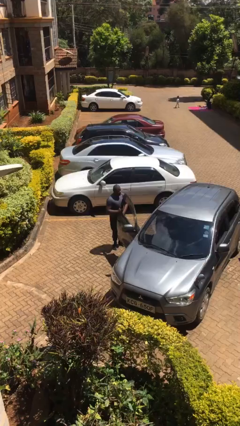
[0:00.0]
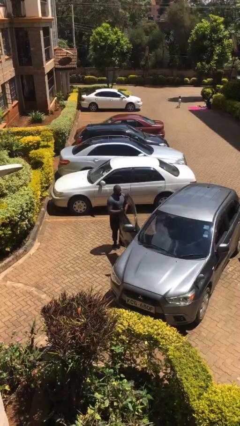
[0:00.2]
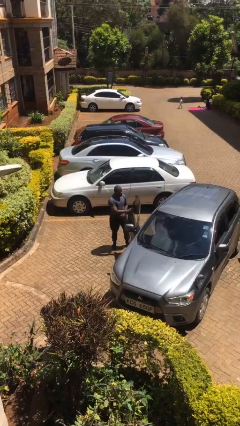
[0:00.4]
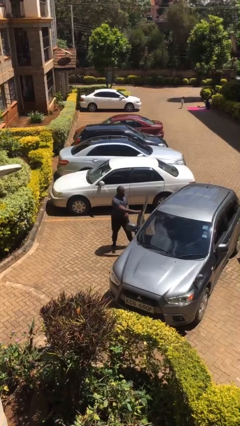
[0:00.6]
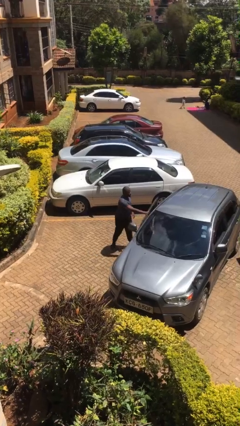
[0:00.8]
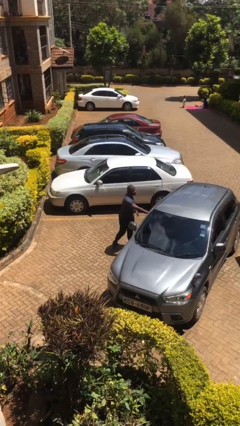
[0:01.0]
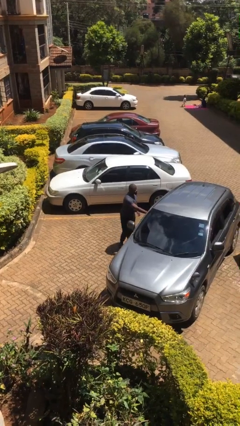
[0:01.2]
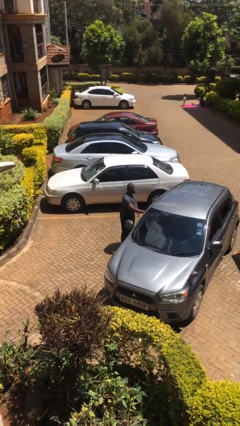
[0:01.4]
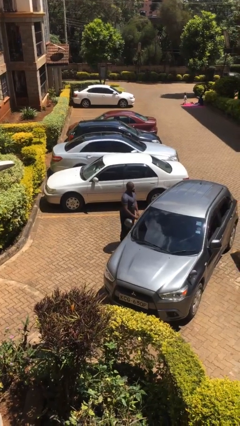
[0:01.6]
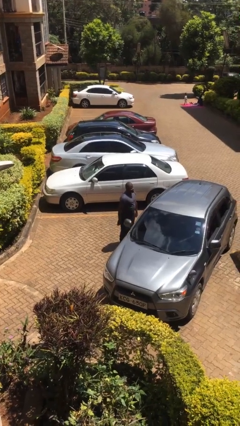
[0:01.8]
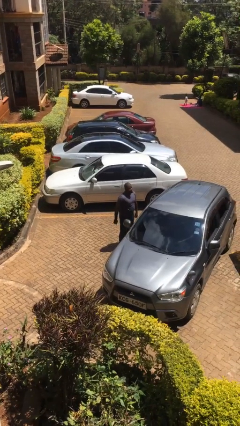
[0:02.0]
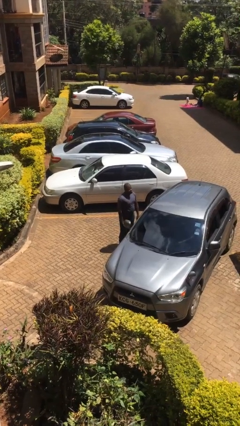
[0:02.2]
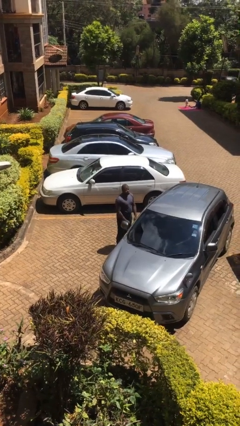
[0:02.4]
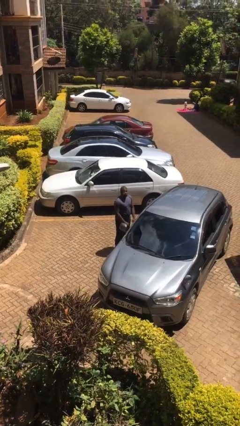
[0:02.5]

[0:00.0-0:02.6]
person closes car door

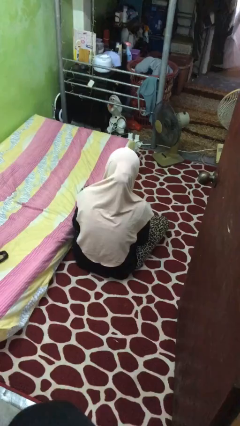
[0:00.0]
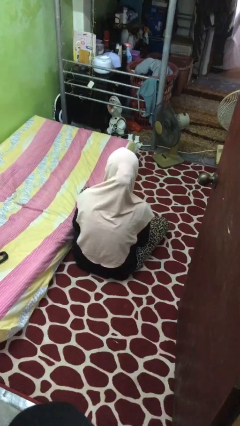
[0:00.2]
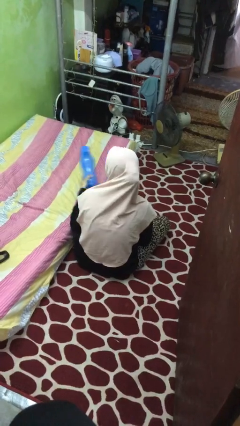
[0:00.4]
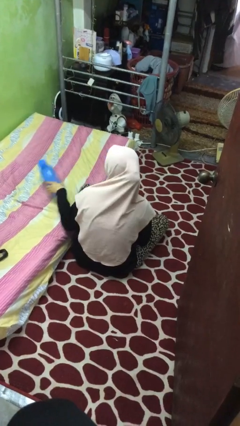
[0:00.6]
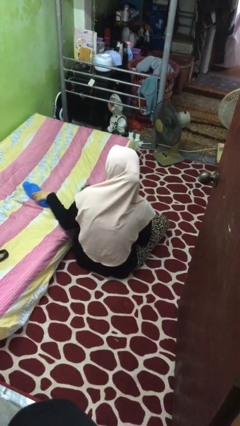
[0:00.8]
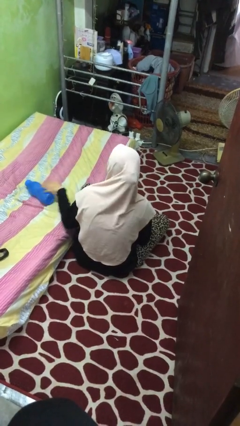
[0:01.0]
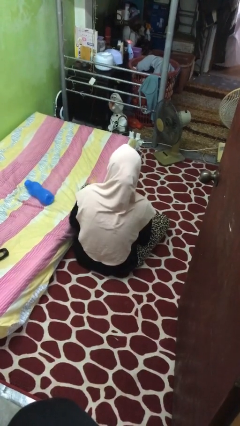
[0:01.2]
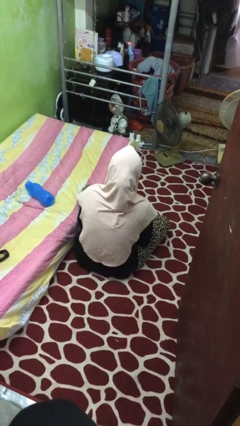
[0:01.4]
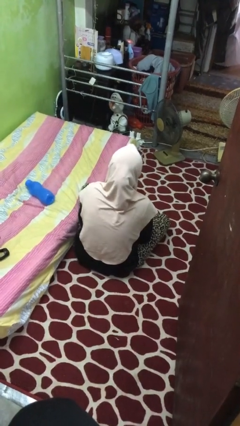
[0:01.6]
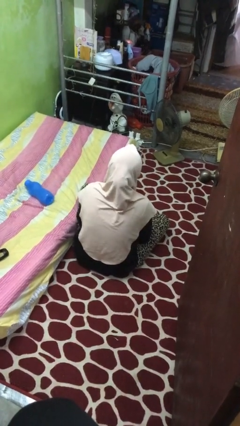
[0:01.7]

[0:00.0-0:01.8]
person puts down object on bed

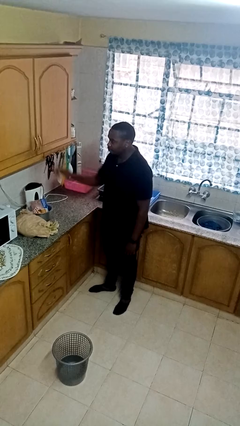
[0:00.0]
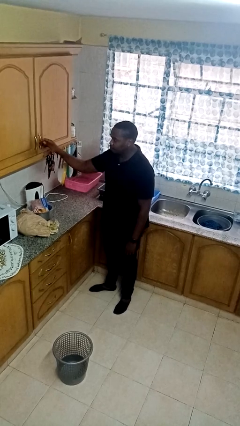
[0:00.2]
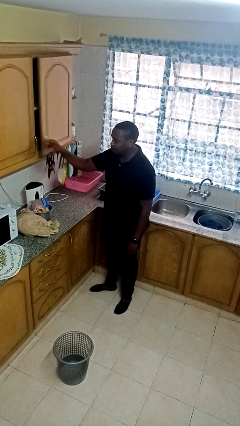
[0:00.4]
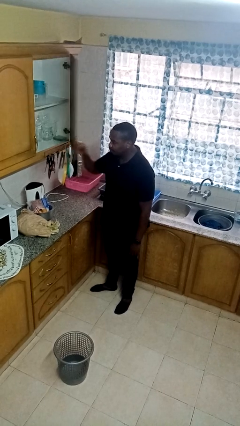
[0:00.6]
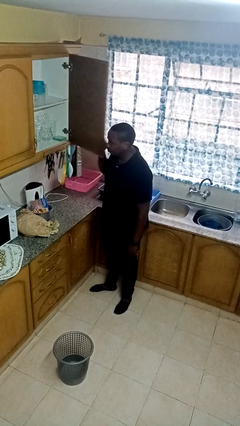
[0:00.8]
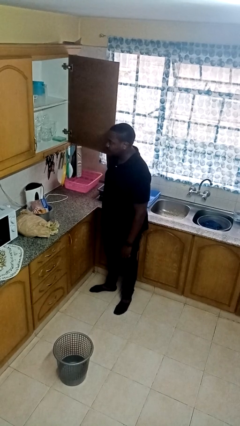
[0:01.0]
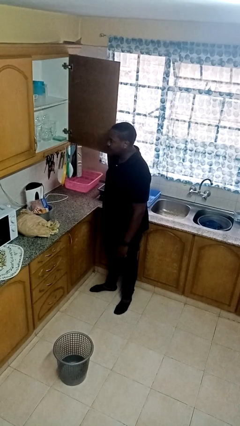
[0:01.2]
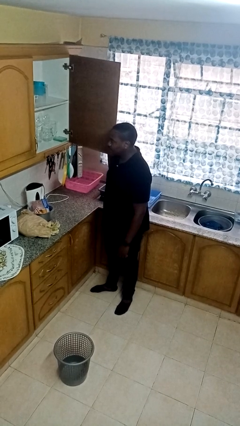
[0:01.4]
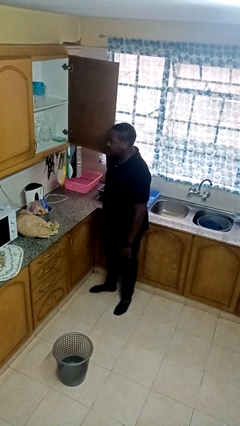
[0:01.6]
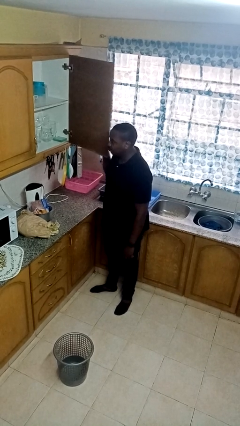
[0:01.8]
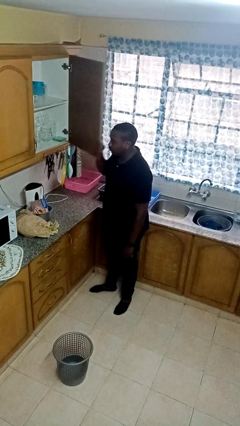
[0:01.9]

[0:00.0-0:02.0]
person opens cabinet

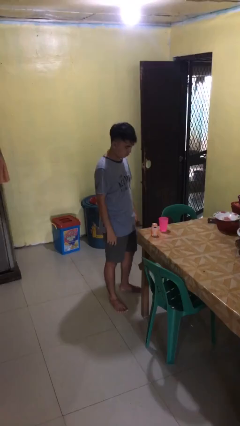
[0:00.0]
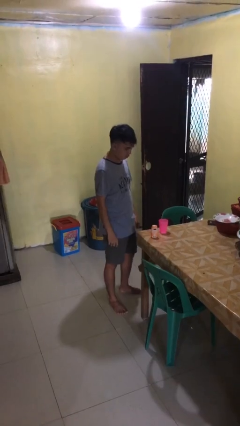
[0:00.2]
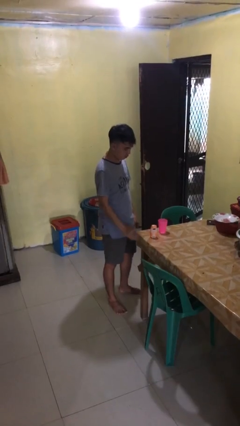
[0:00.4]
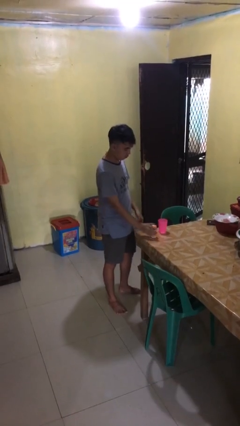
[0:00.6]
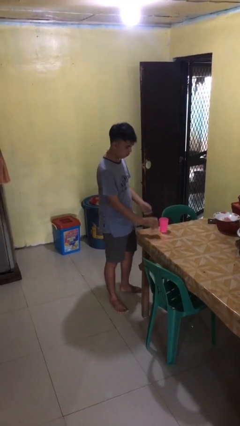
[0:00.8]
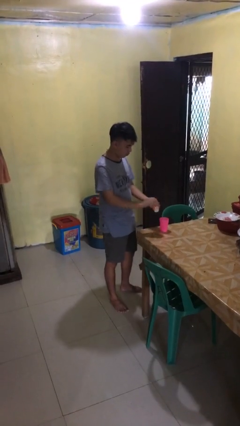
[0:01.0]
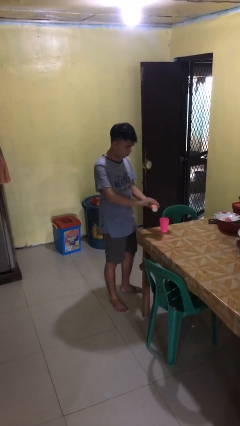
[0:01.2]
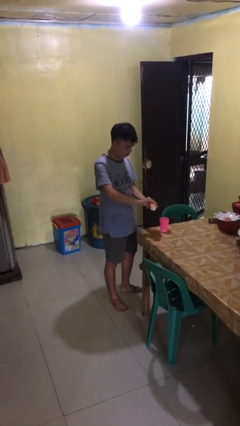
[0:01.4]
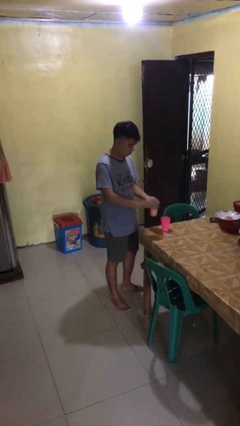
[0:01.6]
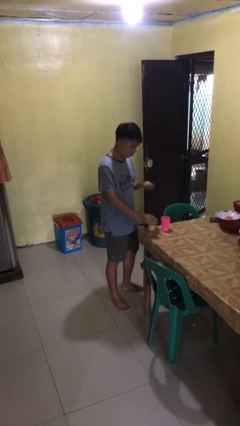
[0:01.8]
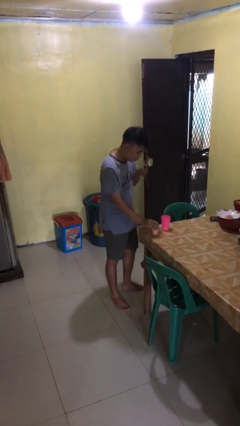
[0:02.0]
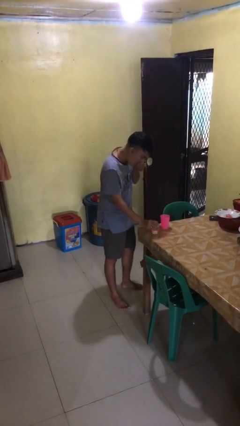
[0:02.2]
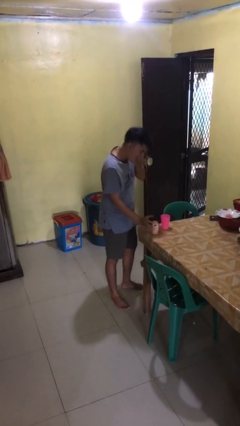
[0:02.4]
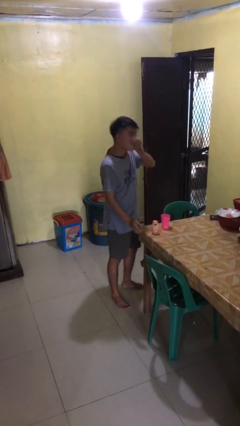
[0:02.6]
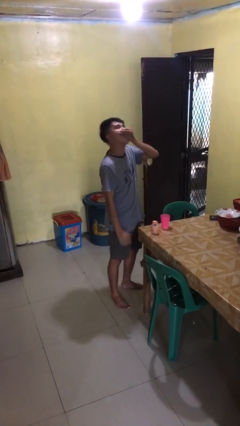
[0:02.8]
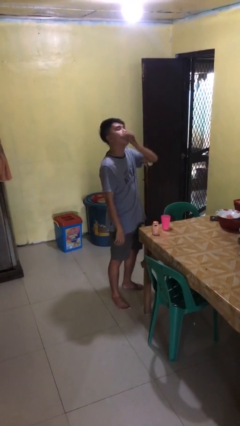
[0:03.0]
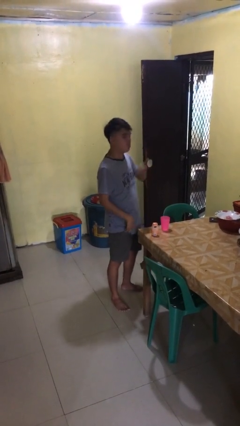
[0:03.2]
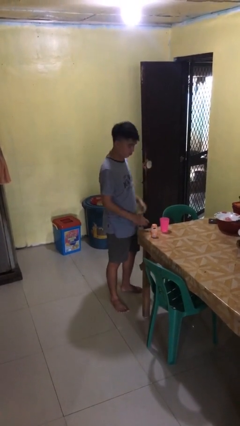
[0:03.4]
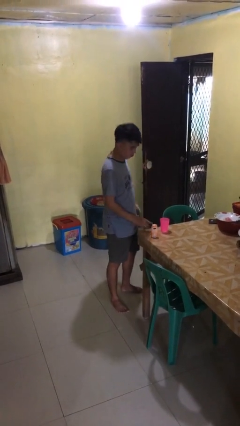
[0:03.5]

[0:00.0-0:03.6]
person takes medicine pills

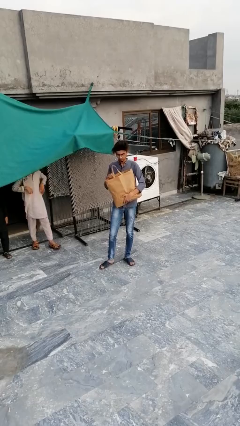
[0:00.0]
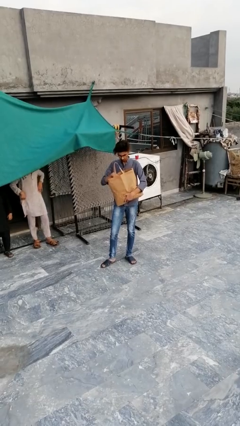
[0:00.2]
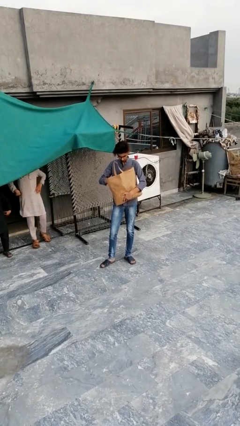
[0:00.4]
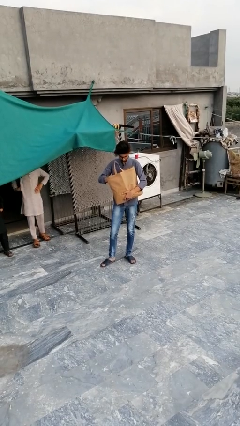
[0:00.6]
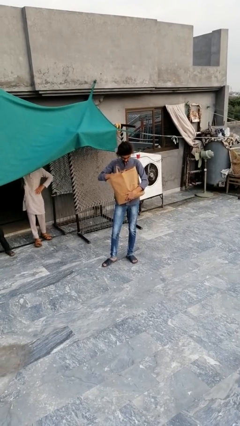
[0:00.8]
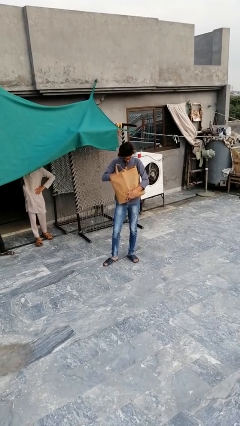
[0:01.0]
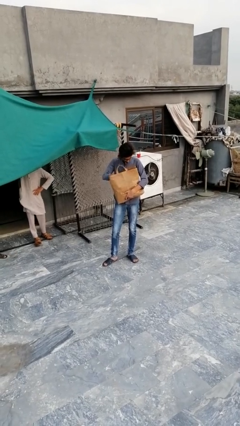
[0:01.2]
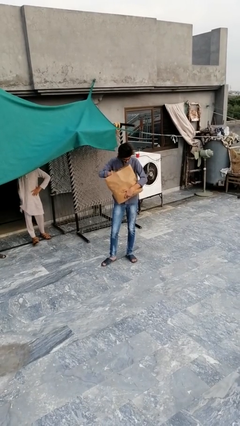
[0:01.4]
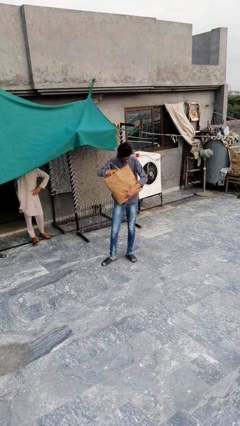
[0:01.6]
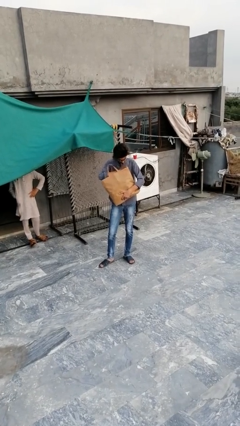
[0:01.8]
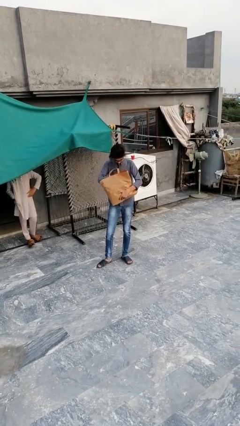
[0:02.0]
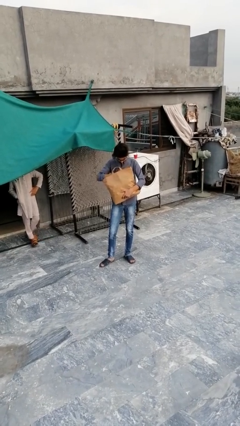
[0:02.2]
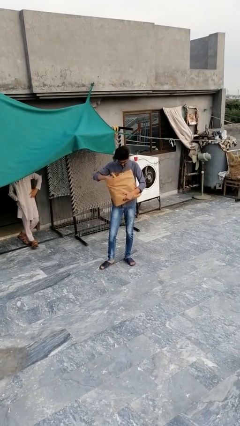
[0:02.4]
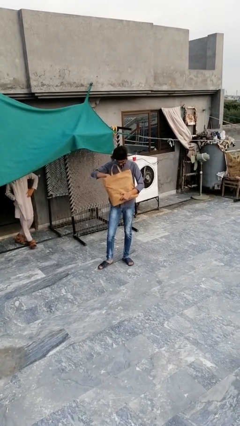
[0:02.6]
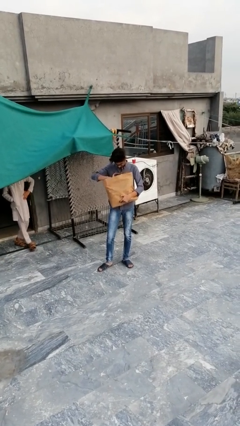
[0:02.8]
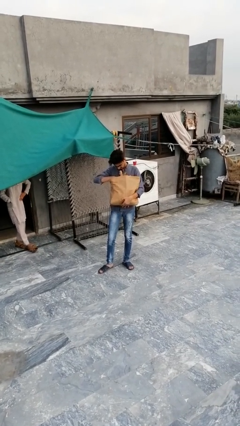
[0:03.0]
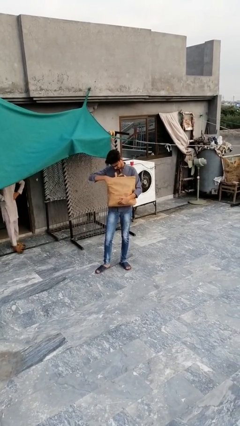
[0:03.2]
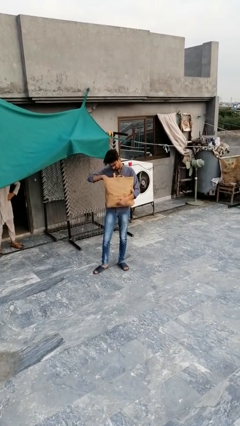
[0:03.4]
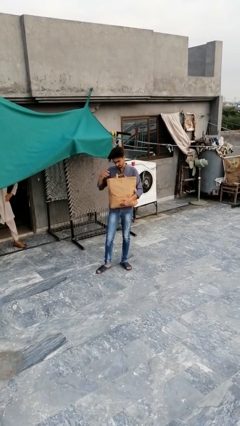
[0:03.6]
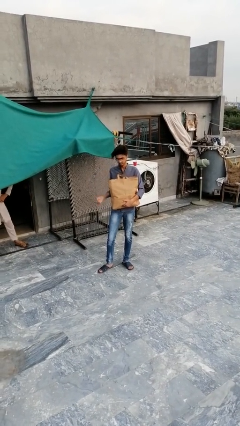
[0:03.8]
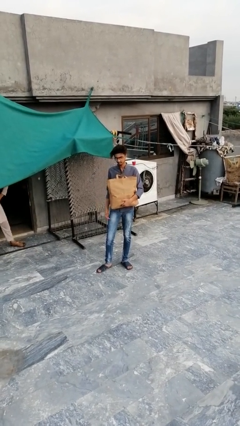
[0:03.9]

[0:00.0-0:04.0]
person searches in bag

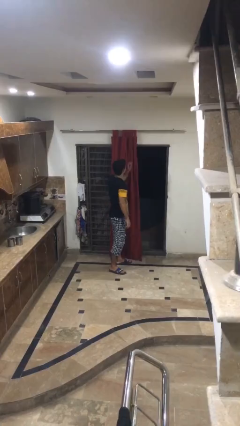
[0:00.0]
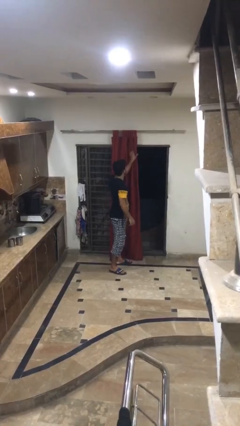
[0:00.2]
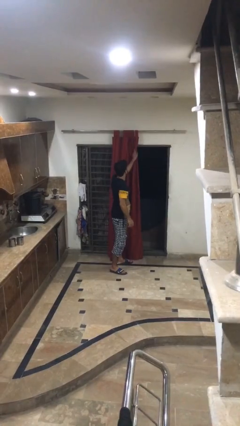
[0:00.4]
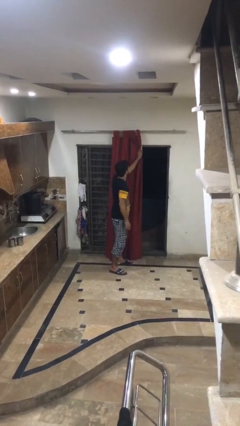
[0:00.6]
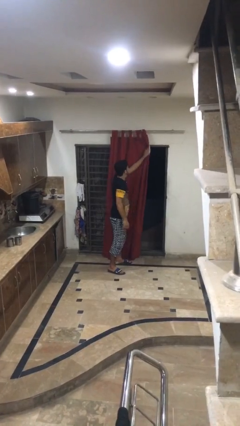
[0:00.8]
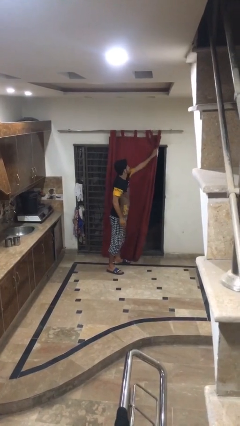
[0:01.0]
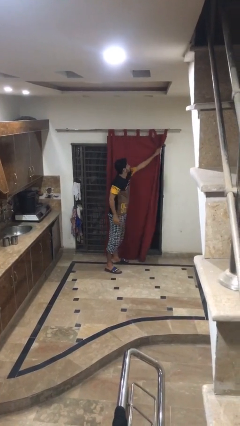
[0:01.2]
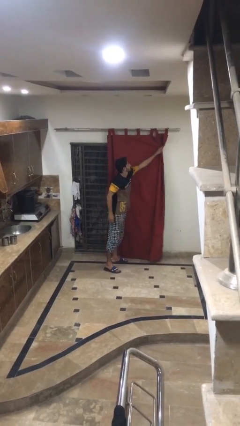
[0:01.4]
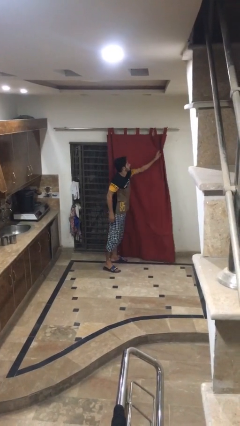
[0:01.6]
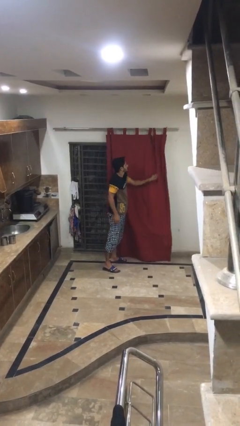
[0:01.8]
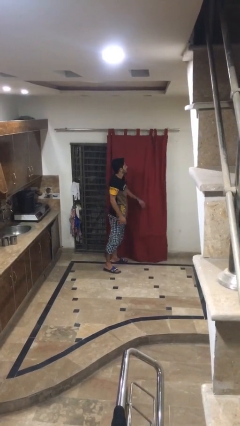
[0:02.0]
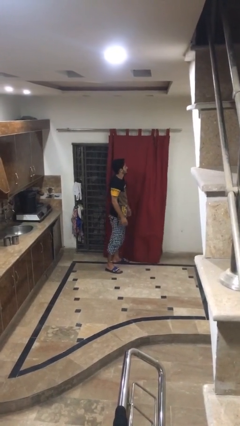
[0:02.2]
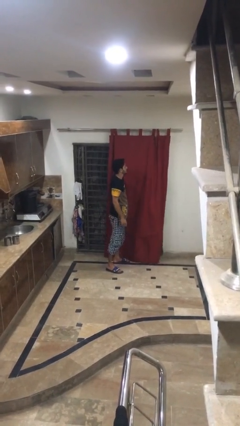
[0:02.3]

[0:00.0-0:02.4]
person closes curtains

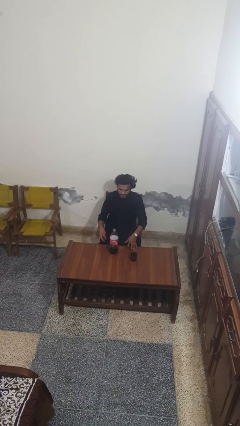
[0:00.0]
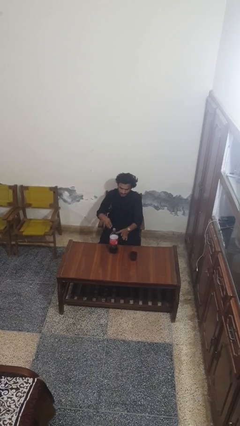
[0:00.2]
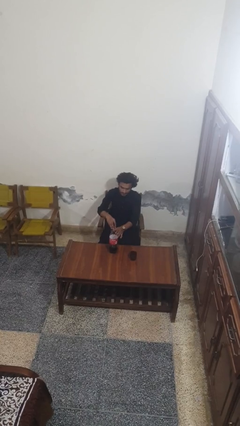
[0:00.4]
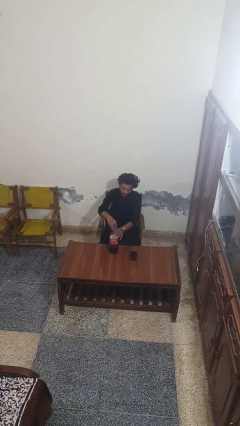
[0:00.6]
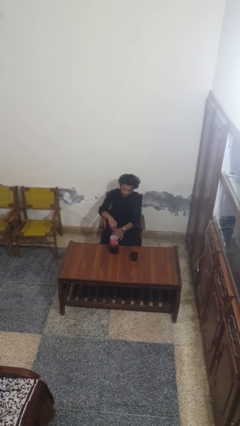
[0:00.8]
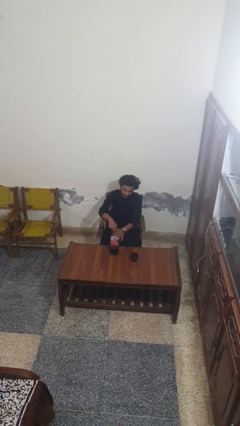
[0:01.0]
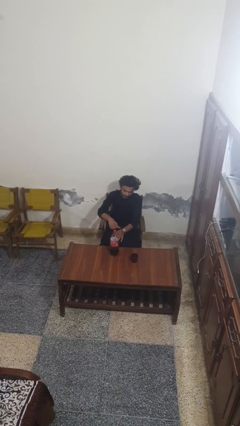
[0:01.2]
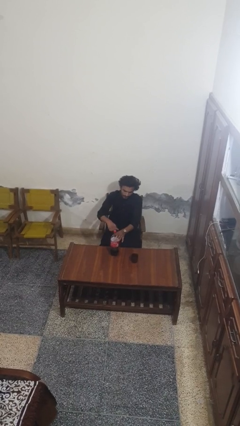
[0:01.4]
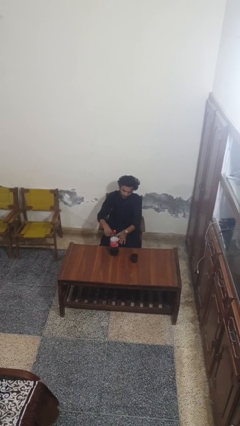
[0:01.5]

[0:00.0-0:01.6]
person screws lid to bottle
